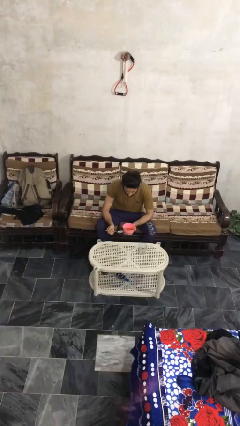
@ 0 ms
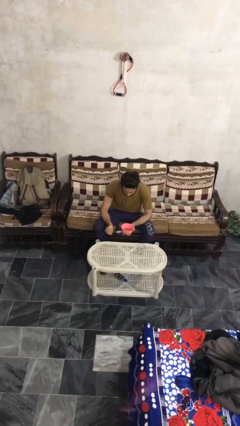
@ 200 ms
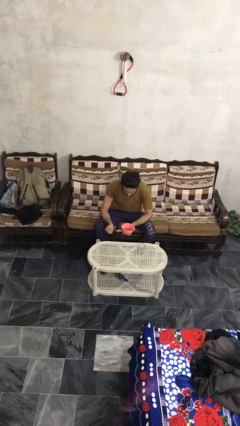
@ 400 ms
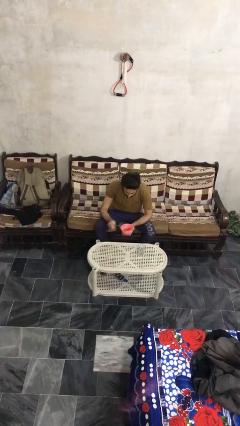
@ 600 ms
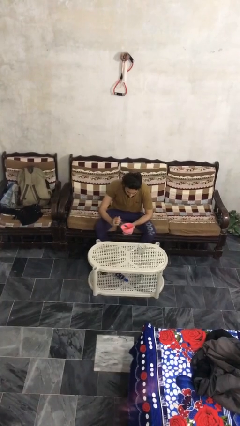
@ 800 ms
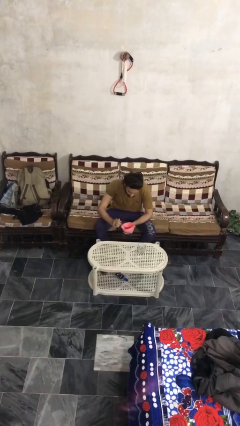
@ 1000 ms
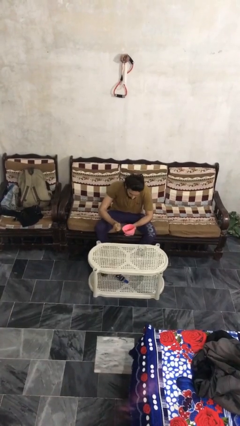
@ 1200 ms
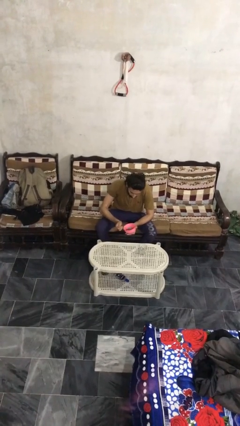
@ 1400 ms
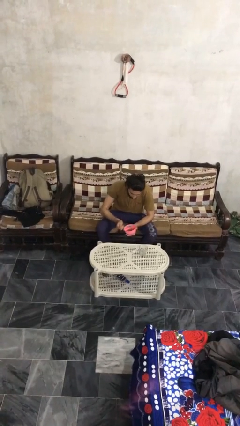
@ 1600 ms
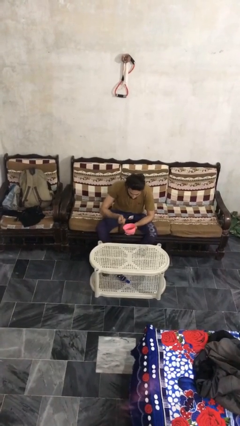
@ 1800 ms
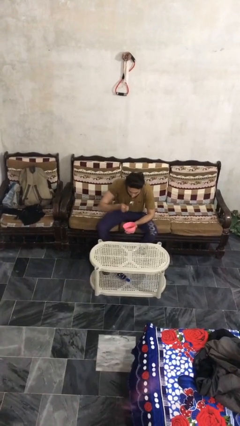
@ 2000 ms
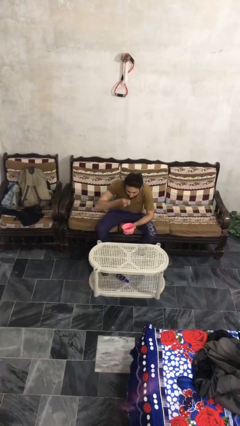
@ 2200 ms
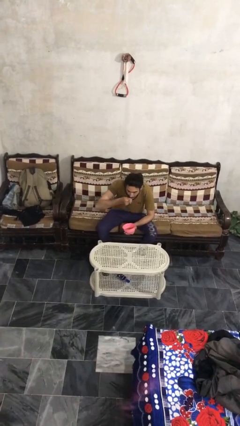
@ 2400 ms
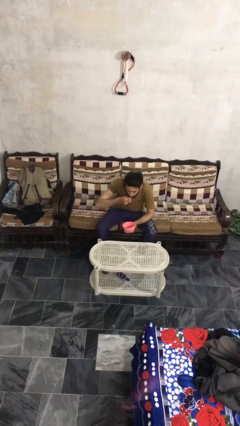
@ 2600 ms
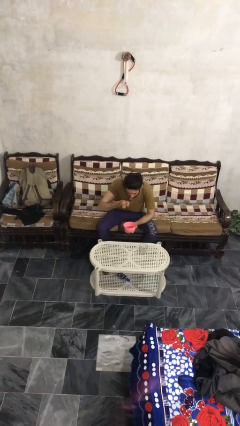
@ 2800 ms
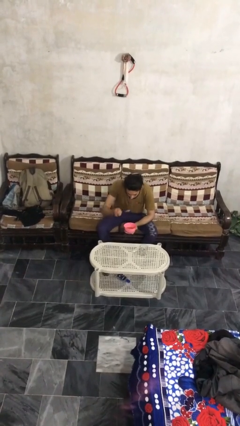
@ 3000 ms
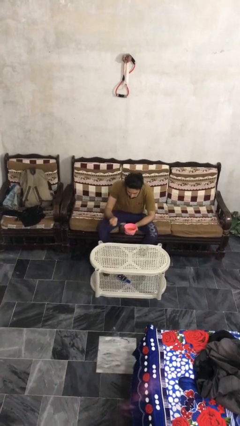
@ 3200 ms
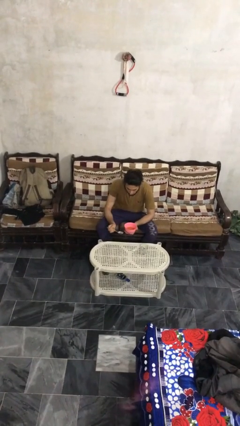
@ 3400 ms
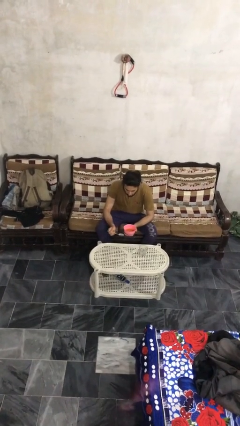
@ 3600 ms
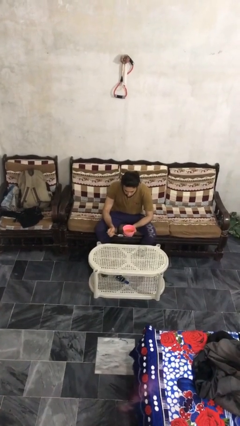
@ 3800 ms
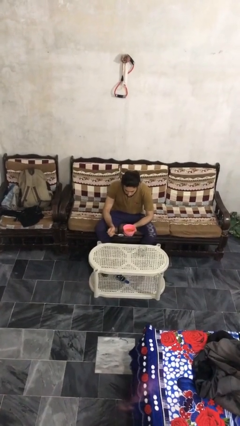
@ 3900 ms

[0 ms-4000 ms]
person eats with utensil

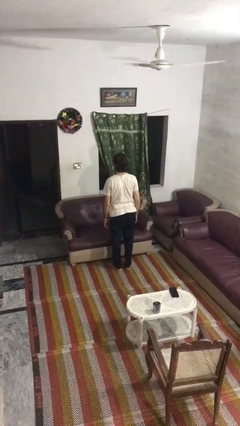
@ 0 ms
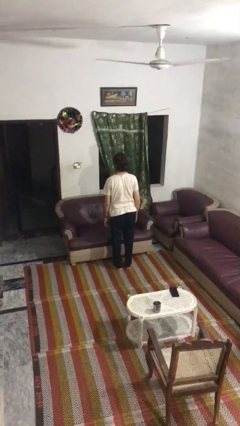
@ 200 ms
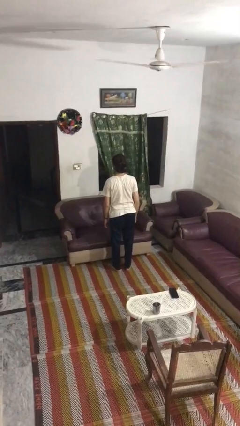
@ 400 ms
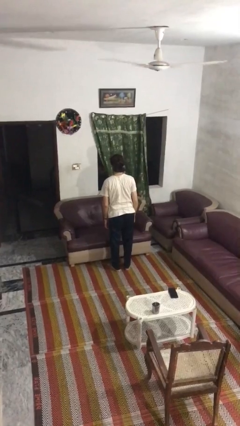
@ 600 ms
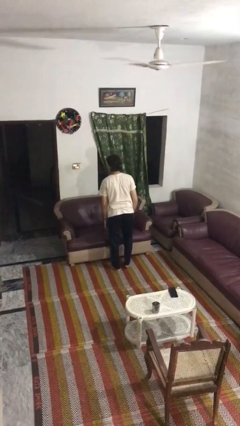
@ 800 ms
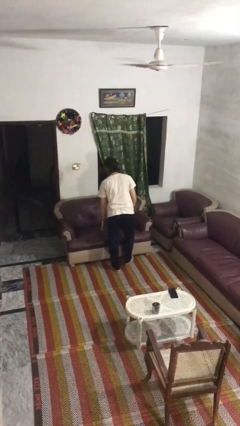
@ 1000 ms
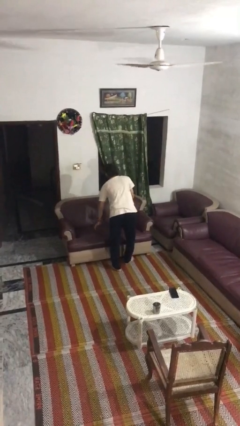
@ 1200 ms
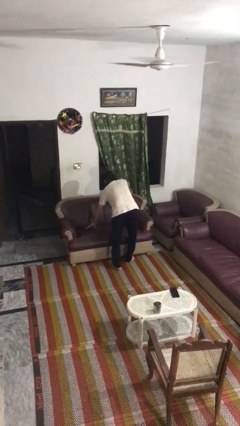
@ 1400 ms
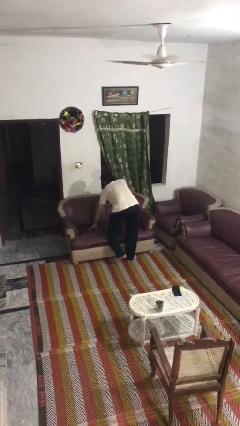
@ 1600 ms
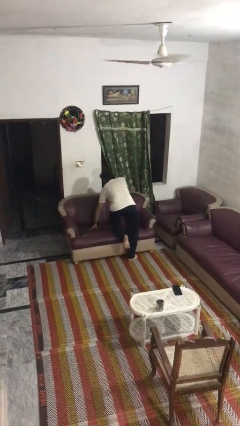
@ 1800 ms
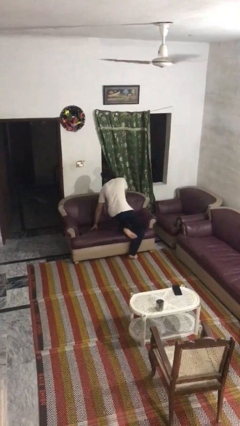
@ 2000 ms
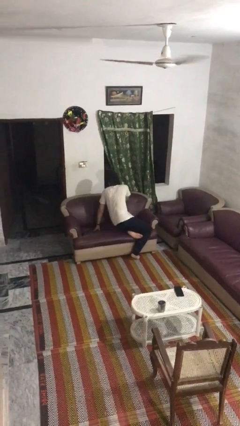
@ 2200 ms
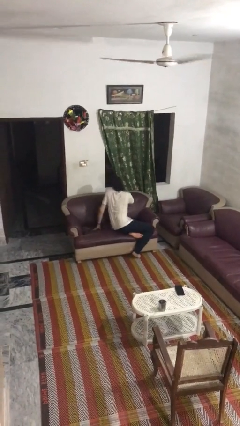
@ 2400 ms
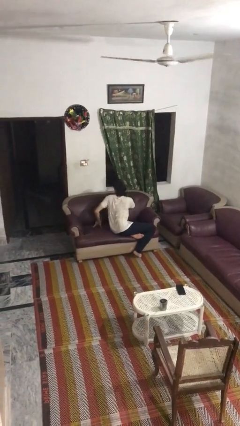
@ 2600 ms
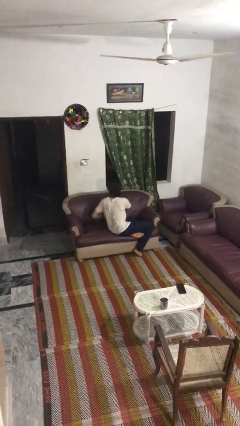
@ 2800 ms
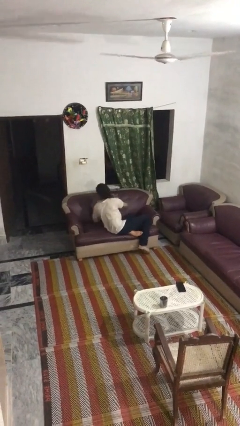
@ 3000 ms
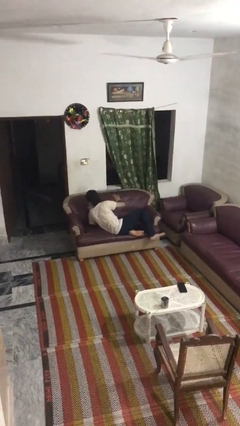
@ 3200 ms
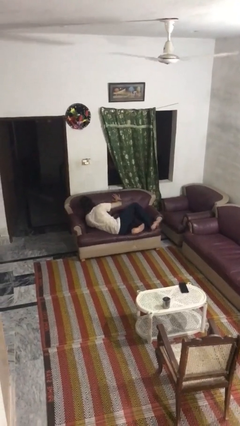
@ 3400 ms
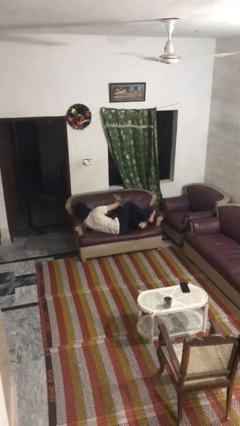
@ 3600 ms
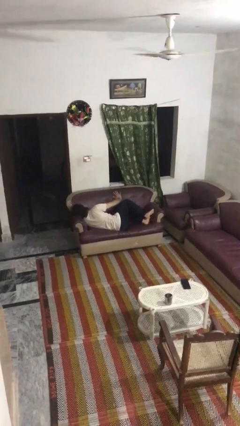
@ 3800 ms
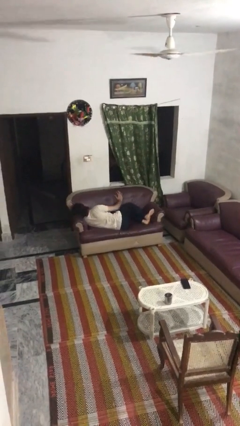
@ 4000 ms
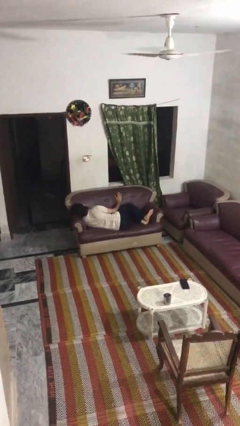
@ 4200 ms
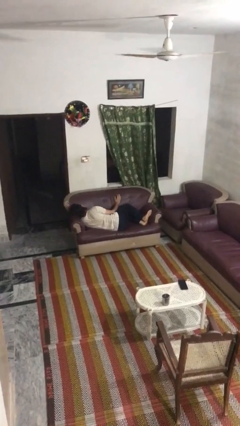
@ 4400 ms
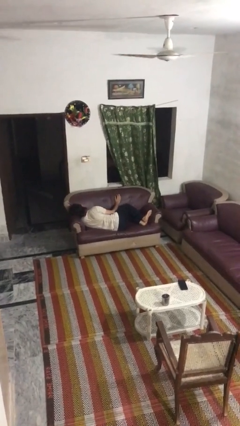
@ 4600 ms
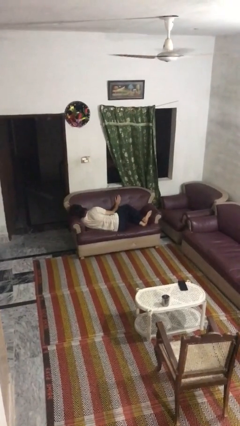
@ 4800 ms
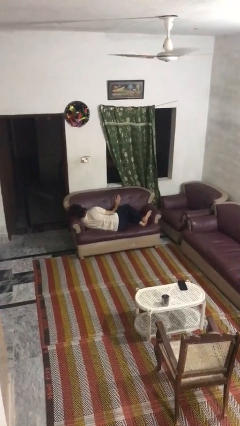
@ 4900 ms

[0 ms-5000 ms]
person lies down on couch

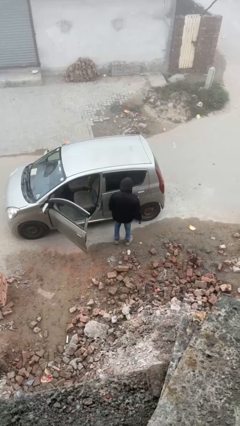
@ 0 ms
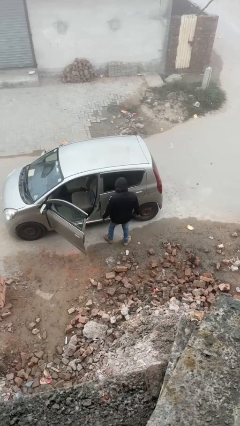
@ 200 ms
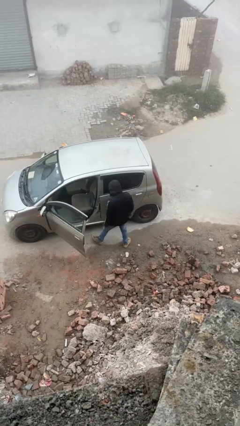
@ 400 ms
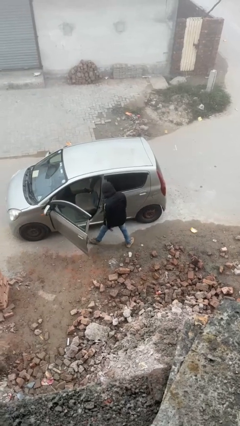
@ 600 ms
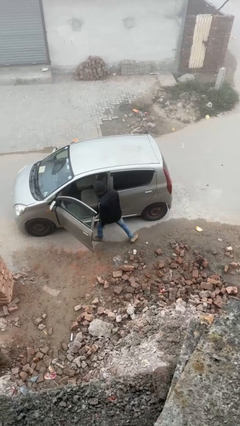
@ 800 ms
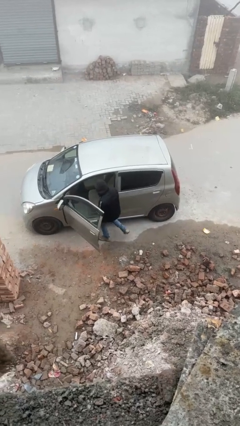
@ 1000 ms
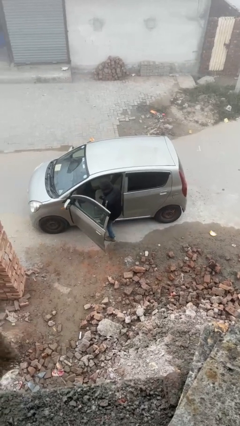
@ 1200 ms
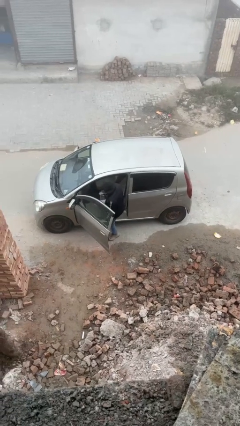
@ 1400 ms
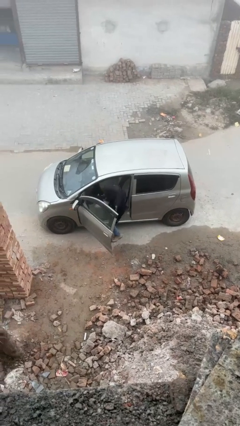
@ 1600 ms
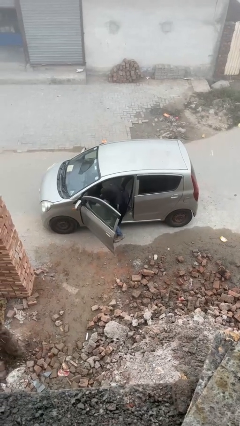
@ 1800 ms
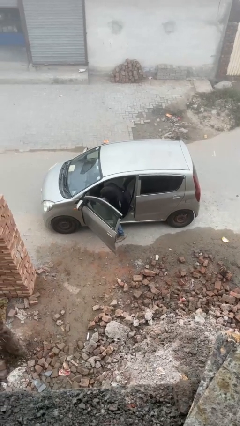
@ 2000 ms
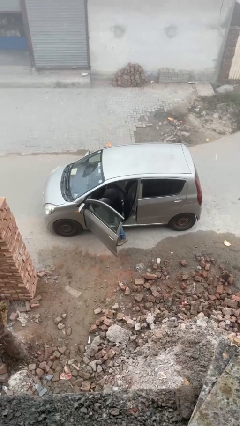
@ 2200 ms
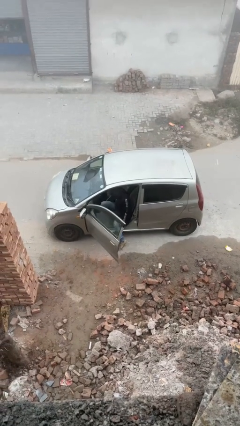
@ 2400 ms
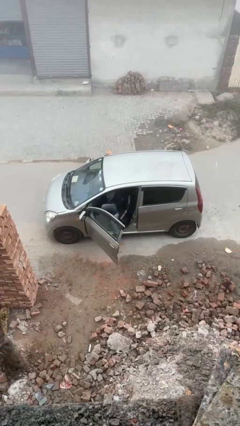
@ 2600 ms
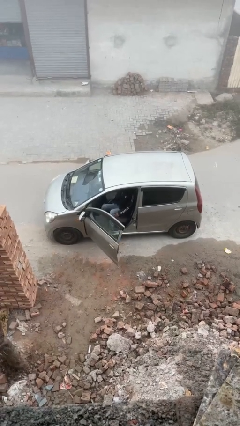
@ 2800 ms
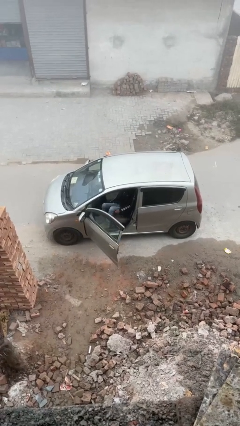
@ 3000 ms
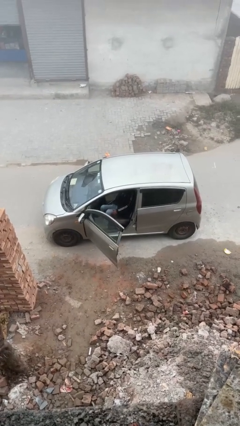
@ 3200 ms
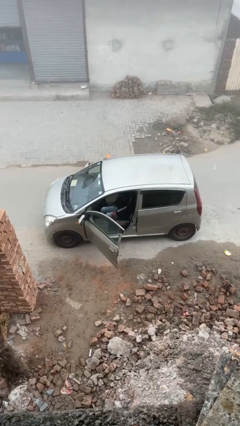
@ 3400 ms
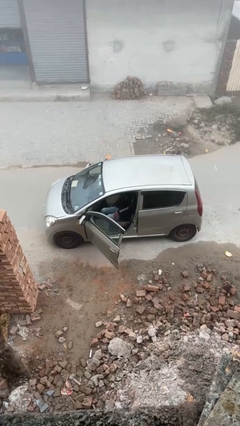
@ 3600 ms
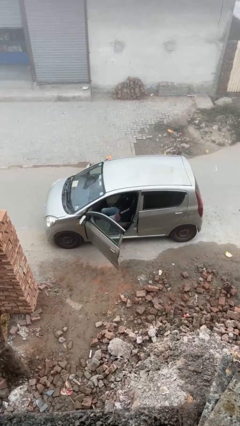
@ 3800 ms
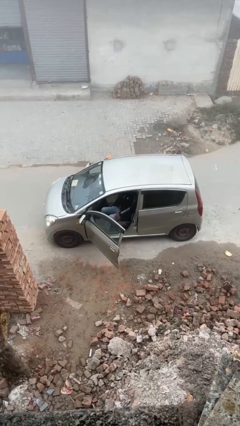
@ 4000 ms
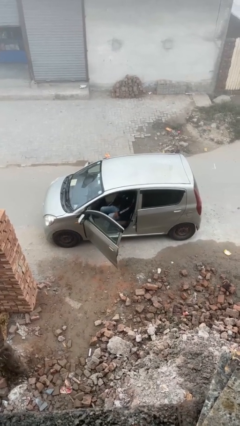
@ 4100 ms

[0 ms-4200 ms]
person enters car

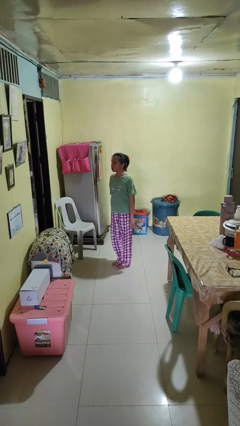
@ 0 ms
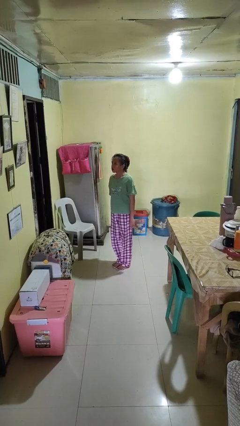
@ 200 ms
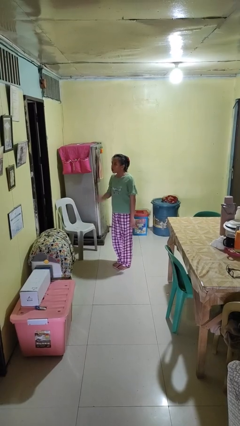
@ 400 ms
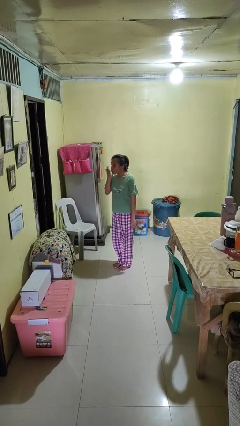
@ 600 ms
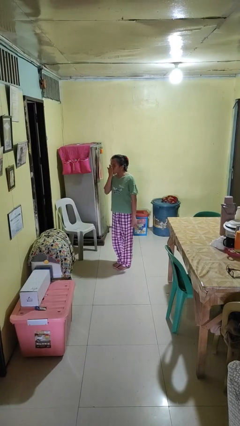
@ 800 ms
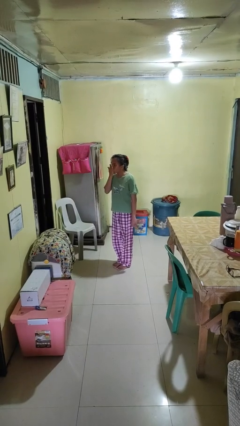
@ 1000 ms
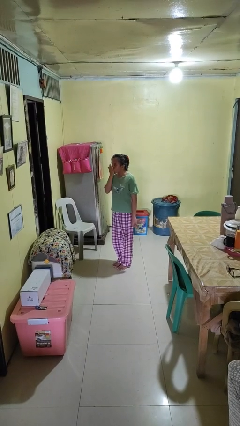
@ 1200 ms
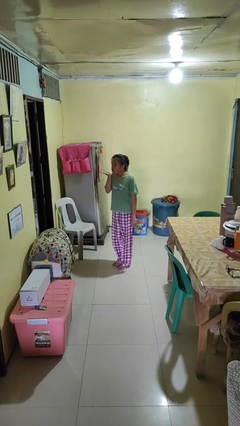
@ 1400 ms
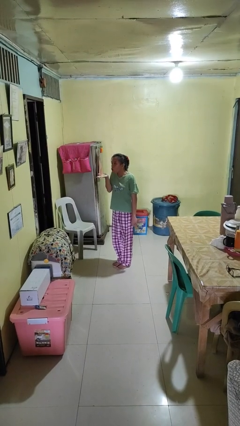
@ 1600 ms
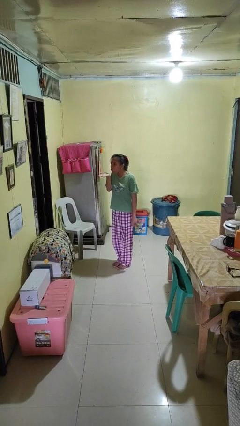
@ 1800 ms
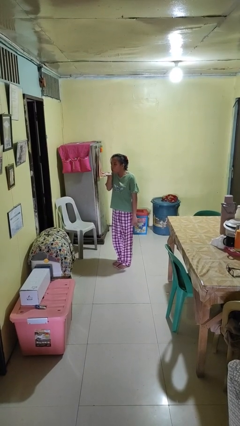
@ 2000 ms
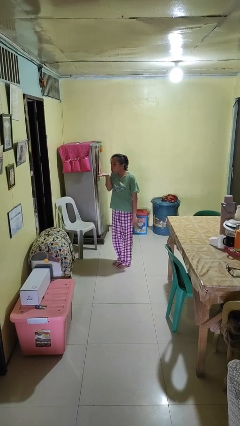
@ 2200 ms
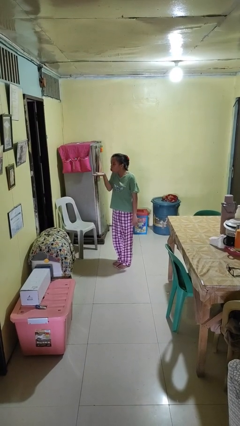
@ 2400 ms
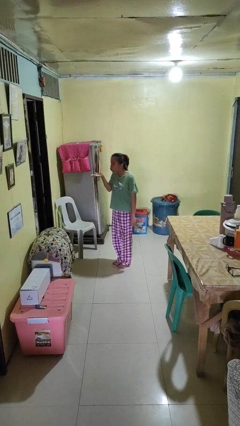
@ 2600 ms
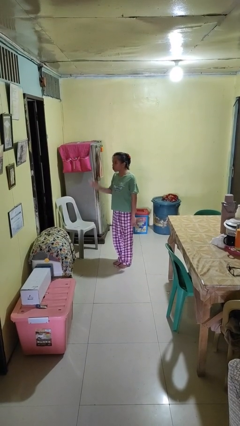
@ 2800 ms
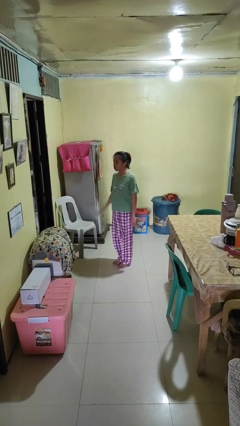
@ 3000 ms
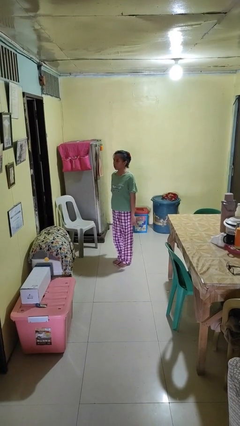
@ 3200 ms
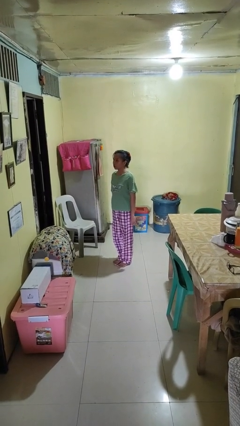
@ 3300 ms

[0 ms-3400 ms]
person gestures blow kiss

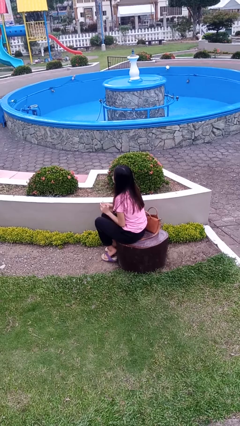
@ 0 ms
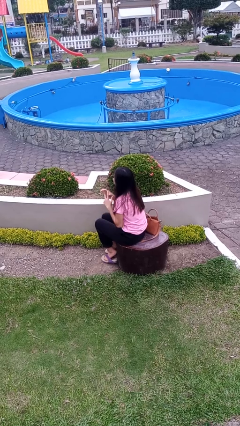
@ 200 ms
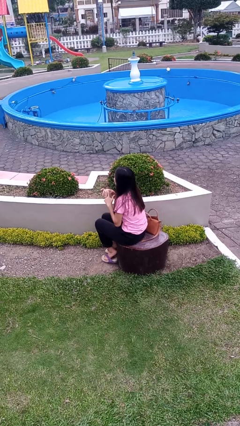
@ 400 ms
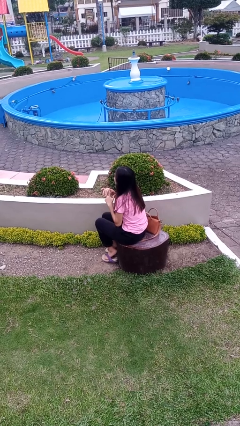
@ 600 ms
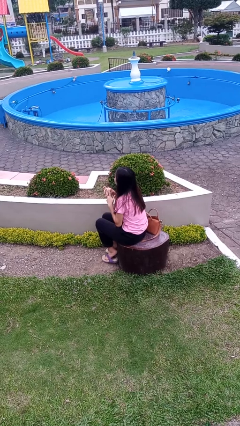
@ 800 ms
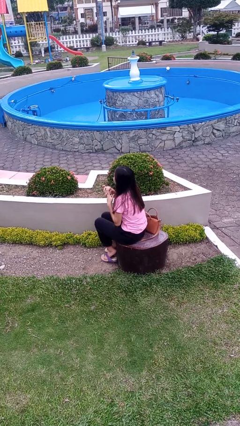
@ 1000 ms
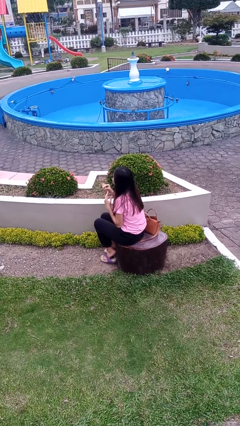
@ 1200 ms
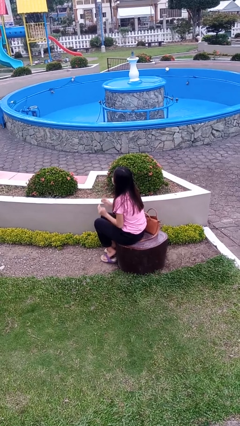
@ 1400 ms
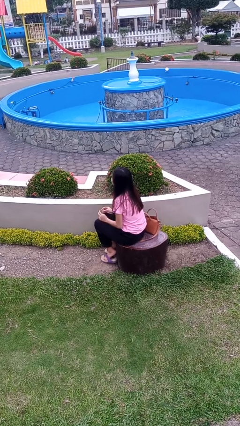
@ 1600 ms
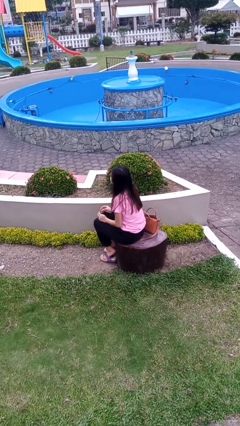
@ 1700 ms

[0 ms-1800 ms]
person takes off ring
